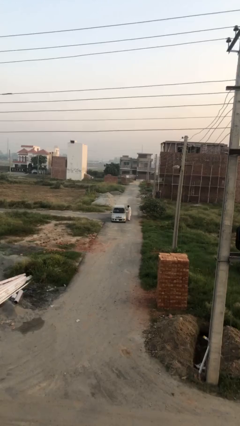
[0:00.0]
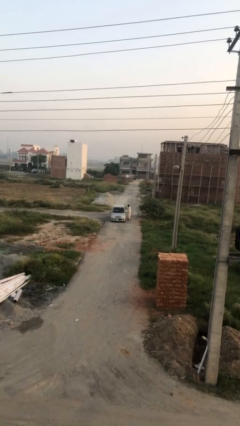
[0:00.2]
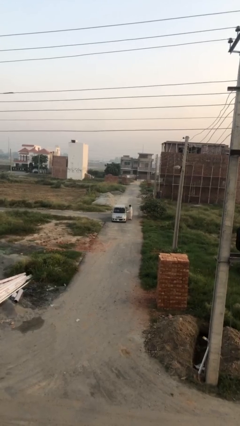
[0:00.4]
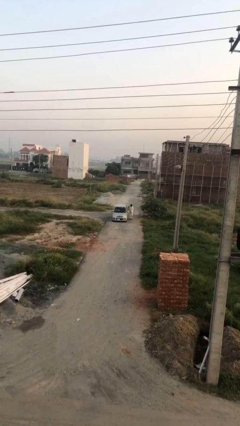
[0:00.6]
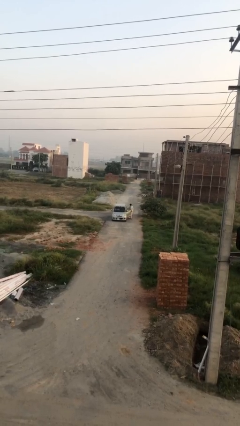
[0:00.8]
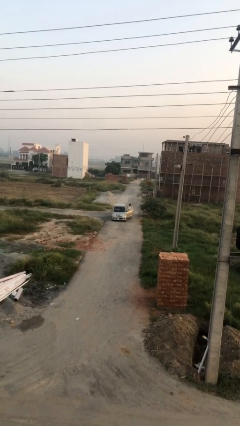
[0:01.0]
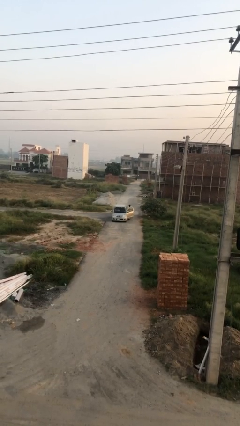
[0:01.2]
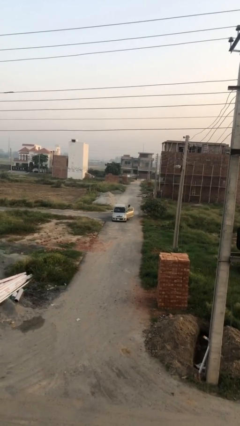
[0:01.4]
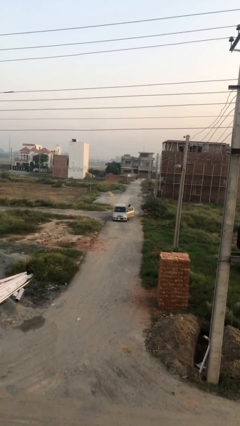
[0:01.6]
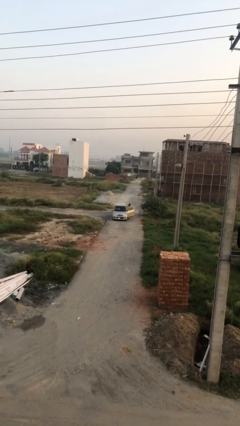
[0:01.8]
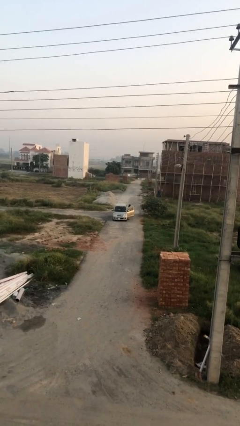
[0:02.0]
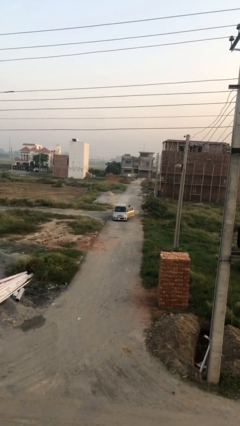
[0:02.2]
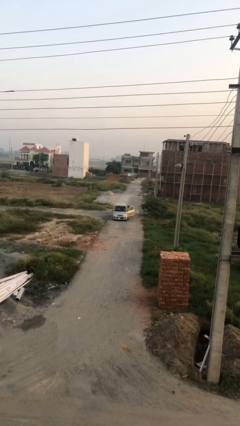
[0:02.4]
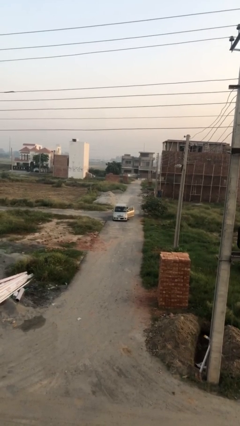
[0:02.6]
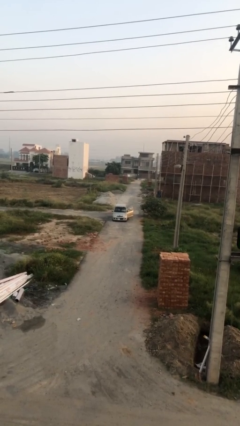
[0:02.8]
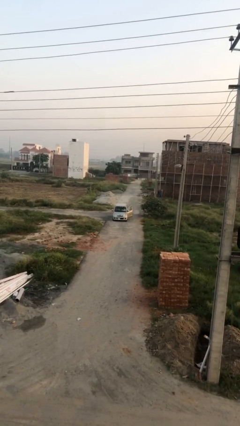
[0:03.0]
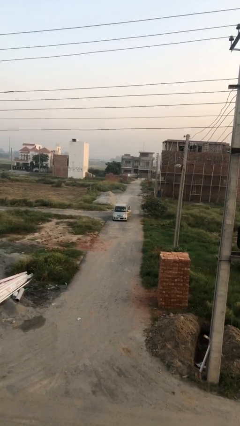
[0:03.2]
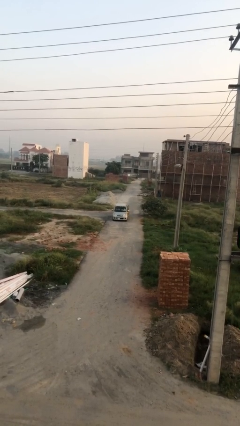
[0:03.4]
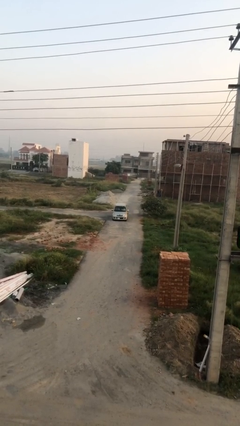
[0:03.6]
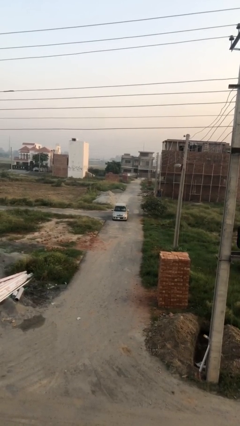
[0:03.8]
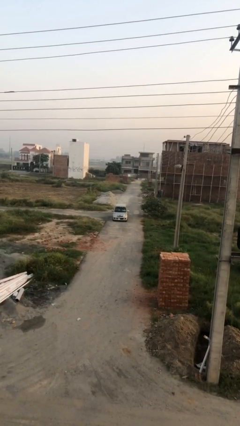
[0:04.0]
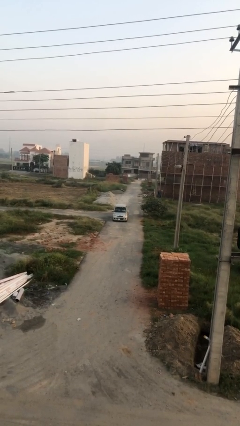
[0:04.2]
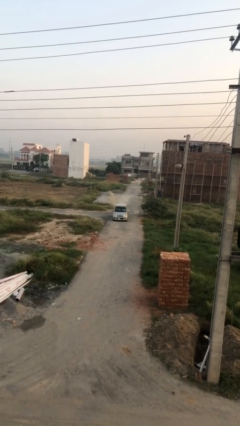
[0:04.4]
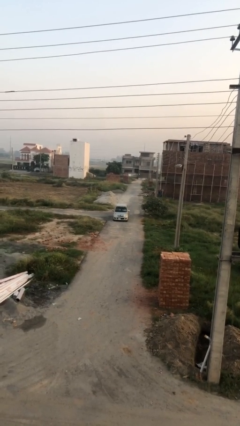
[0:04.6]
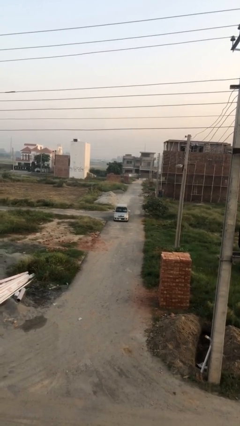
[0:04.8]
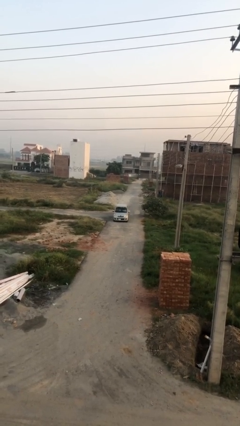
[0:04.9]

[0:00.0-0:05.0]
car picks up person

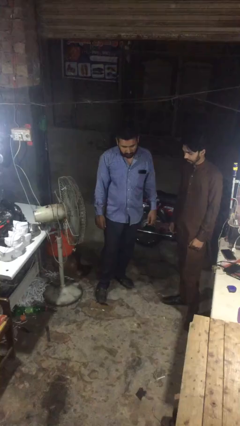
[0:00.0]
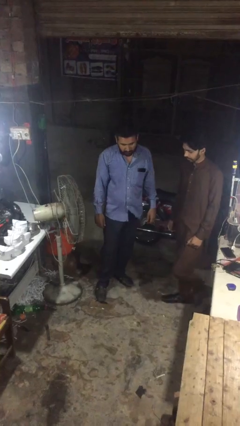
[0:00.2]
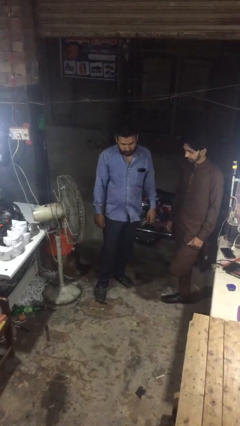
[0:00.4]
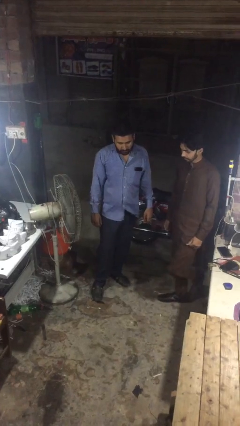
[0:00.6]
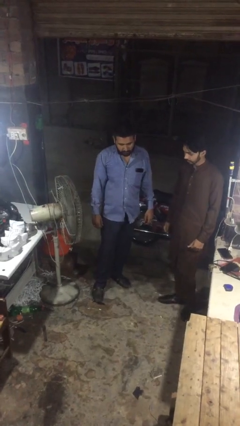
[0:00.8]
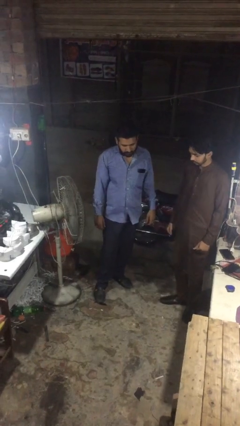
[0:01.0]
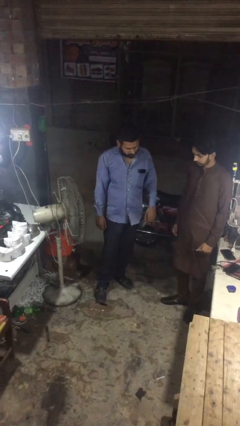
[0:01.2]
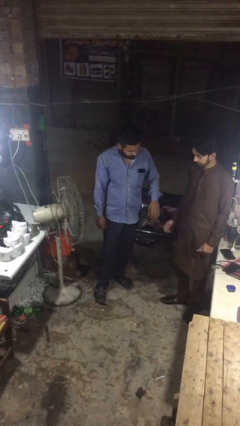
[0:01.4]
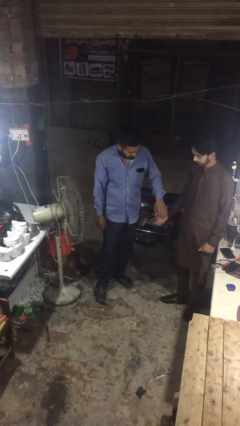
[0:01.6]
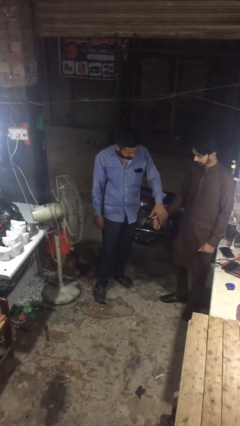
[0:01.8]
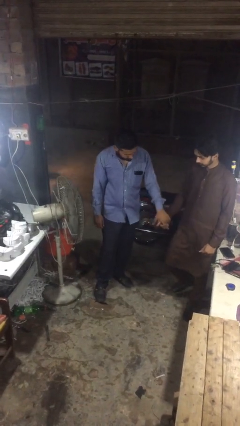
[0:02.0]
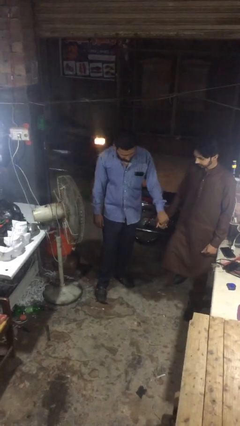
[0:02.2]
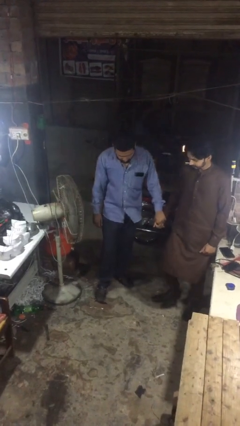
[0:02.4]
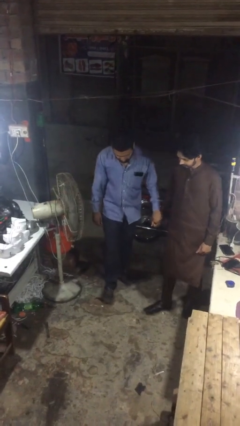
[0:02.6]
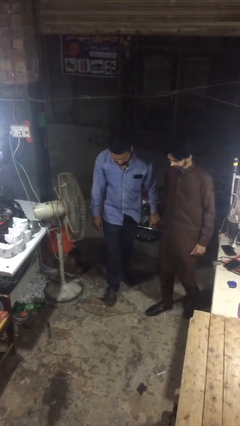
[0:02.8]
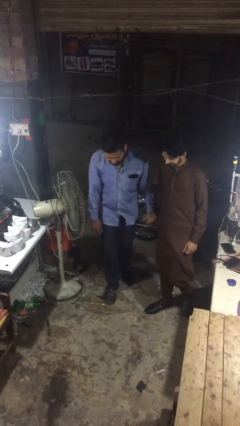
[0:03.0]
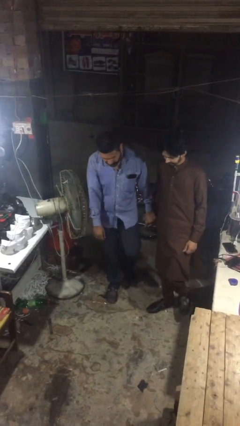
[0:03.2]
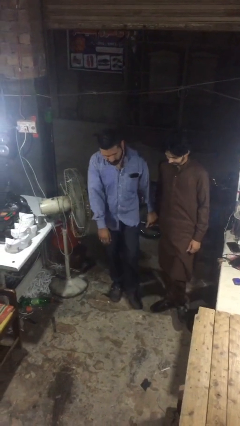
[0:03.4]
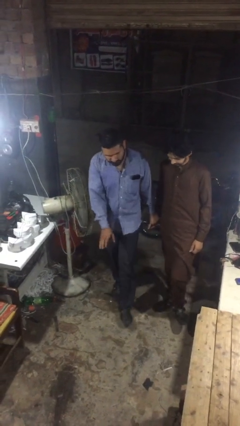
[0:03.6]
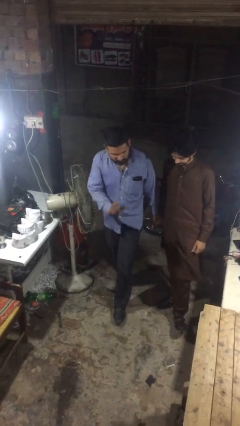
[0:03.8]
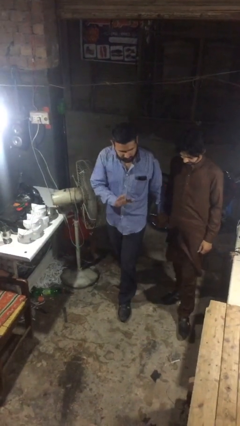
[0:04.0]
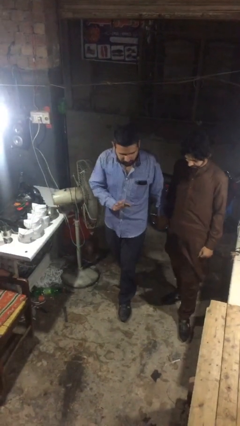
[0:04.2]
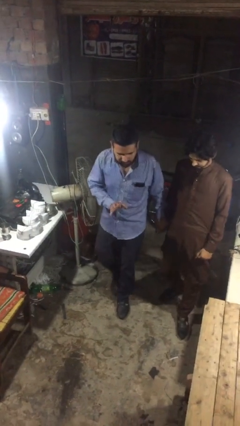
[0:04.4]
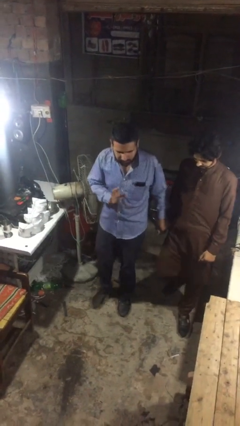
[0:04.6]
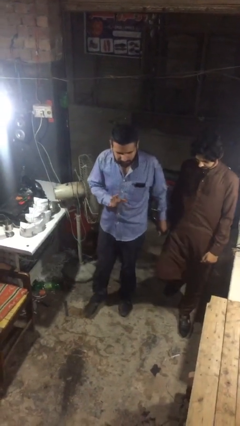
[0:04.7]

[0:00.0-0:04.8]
person holds hand

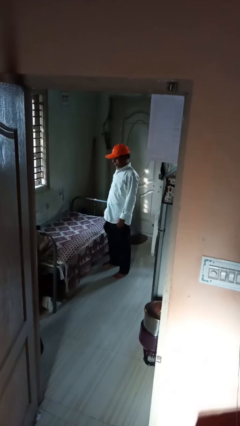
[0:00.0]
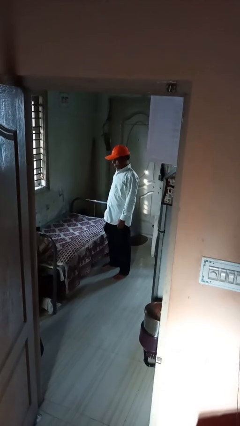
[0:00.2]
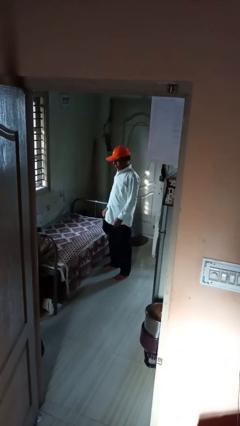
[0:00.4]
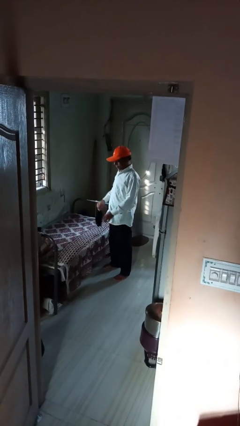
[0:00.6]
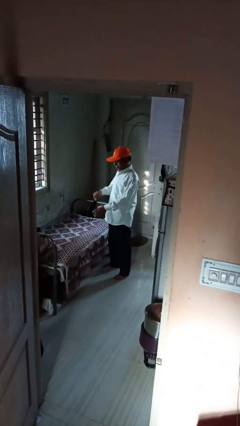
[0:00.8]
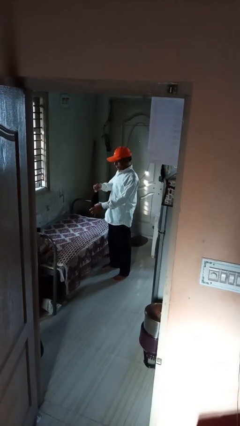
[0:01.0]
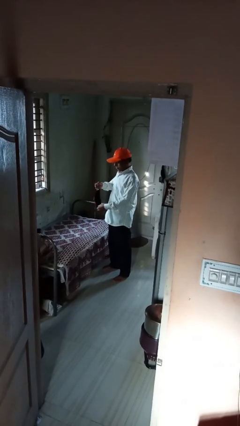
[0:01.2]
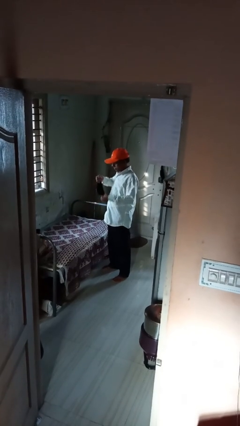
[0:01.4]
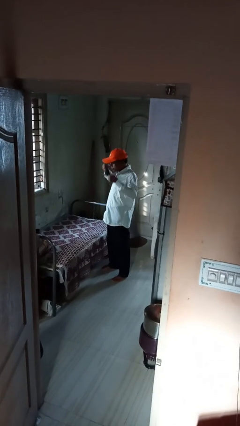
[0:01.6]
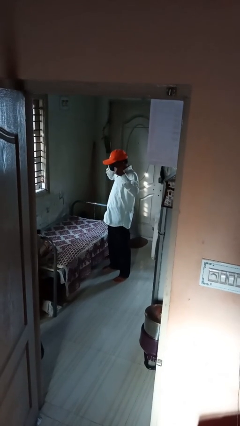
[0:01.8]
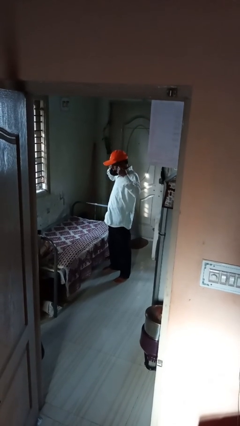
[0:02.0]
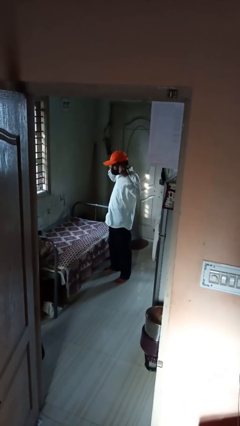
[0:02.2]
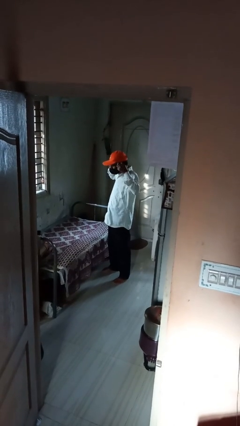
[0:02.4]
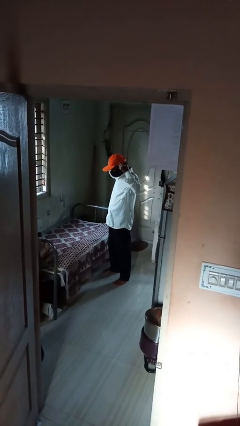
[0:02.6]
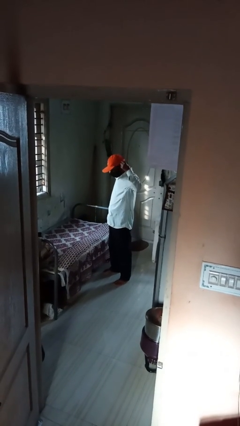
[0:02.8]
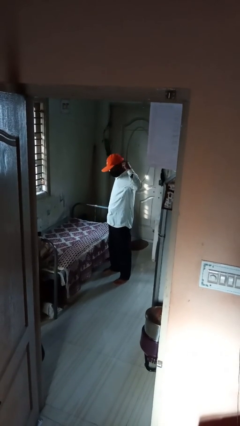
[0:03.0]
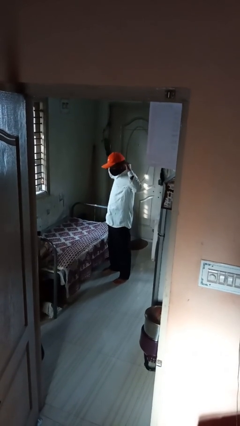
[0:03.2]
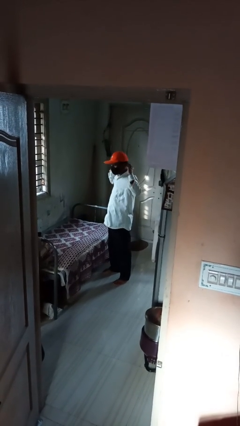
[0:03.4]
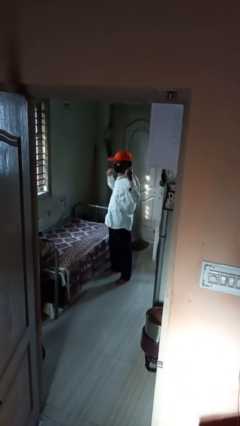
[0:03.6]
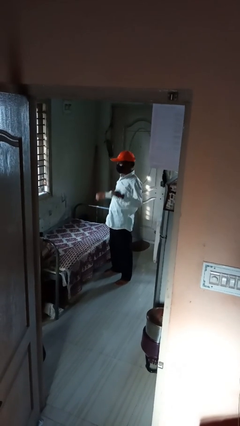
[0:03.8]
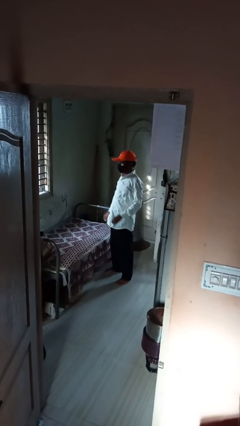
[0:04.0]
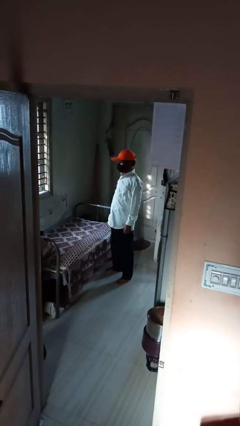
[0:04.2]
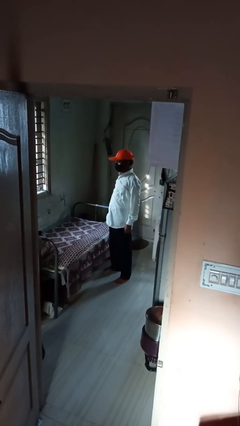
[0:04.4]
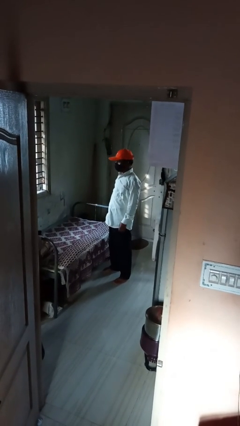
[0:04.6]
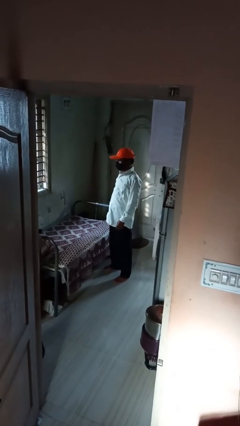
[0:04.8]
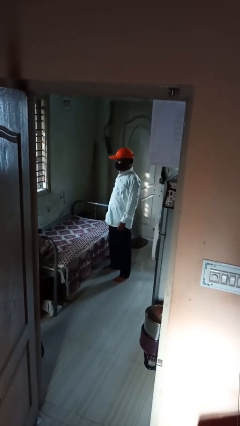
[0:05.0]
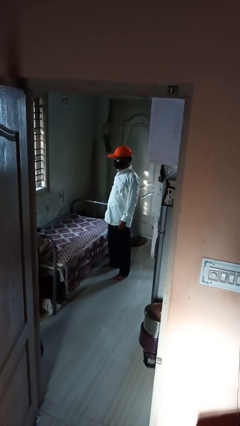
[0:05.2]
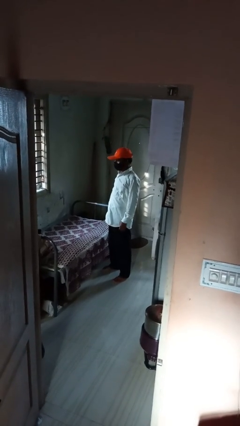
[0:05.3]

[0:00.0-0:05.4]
person puts on facemask

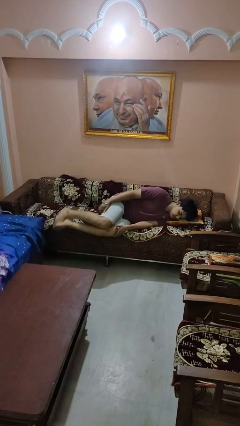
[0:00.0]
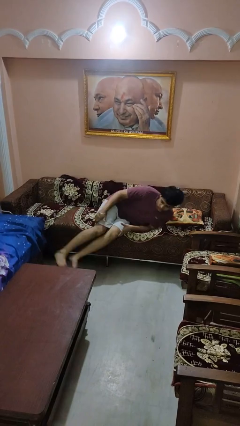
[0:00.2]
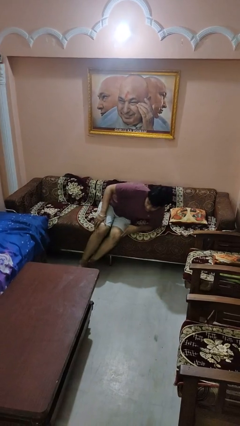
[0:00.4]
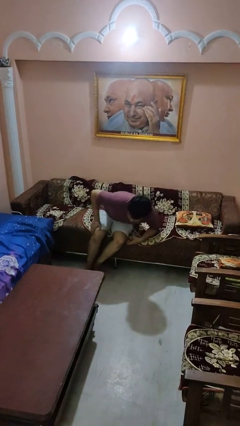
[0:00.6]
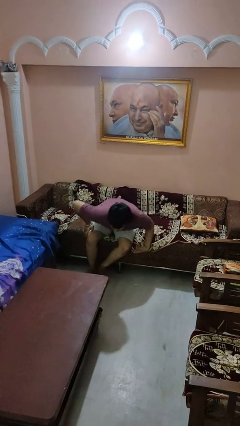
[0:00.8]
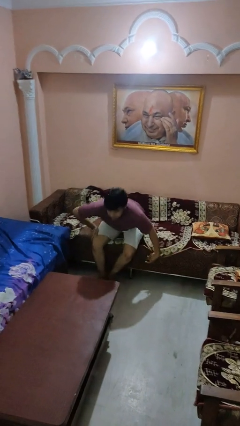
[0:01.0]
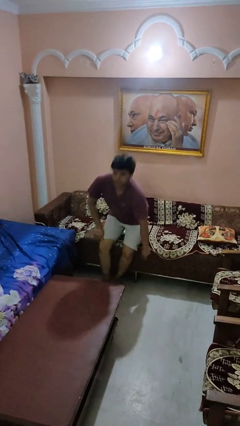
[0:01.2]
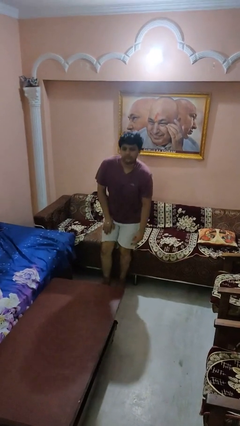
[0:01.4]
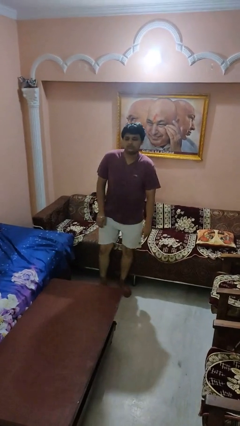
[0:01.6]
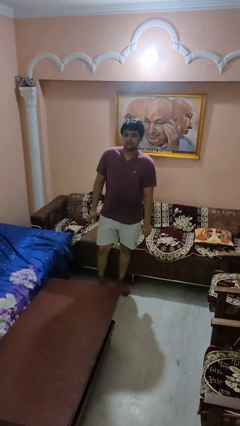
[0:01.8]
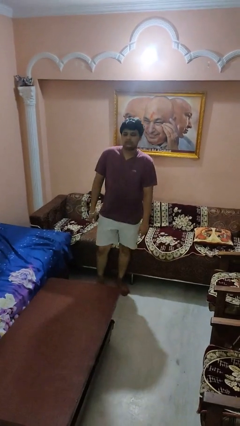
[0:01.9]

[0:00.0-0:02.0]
person stands up

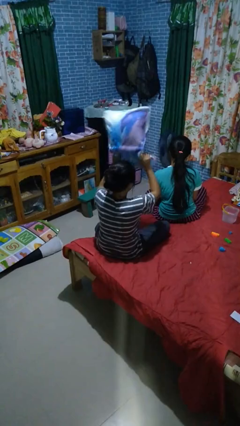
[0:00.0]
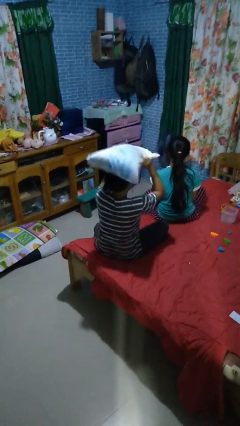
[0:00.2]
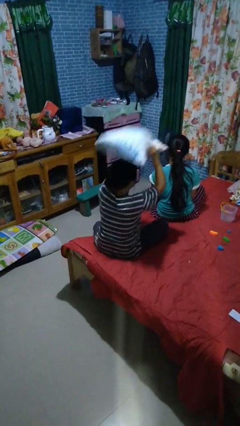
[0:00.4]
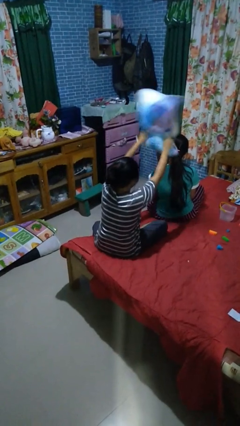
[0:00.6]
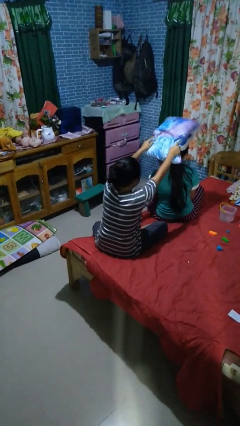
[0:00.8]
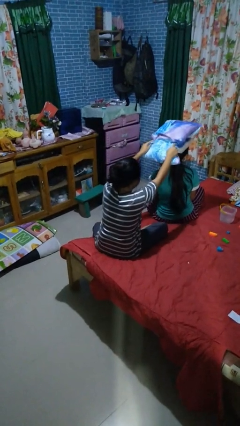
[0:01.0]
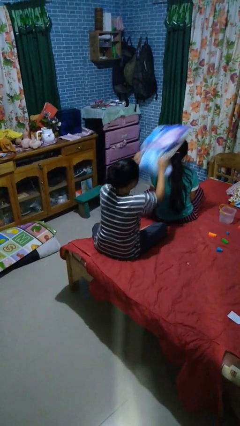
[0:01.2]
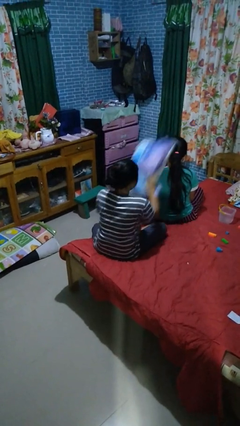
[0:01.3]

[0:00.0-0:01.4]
person hits person with pillow
